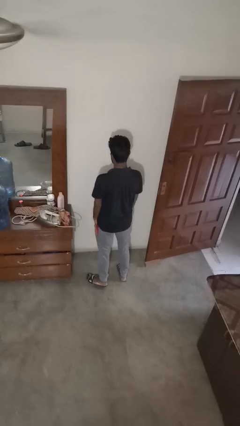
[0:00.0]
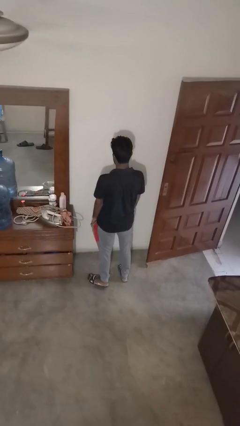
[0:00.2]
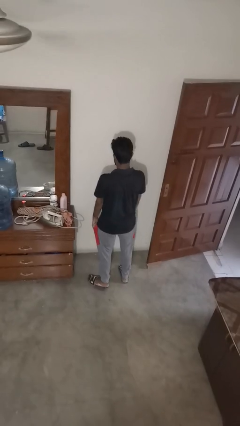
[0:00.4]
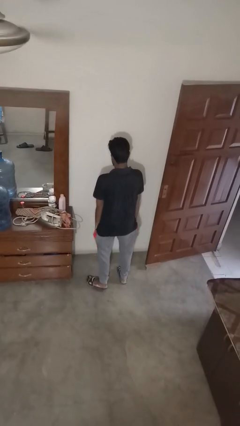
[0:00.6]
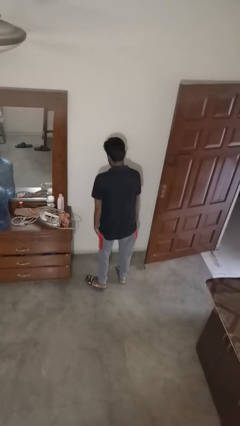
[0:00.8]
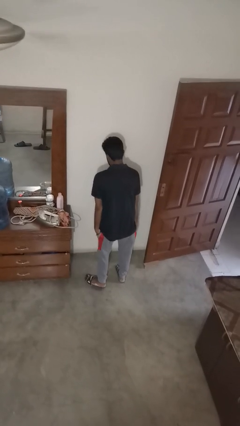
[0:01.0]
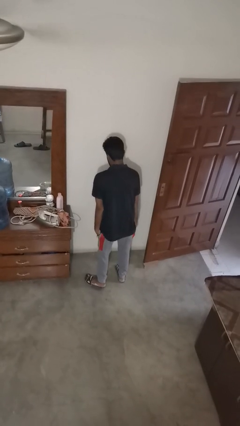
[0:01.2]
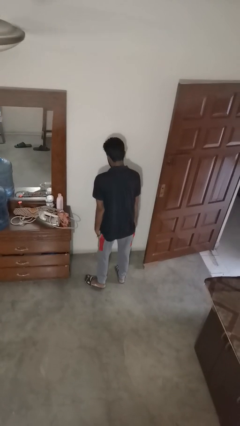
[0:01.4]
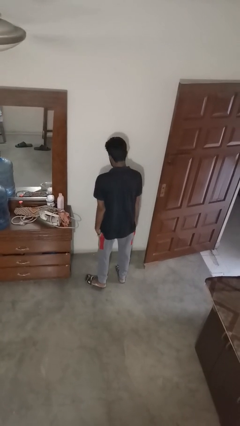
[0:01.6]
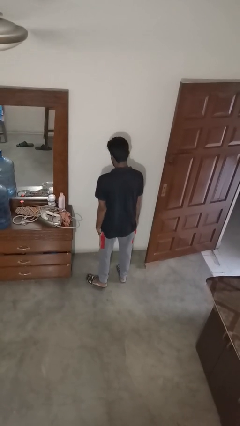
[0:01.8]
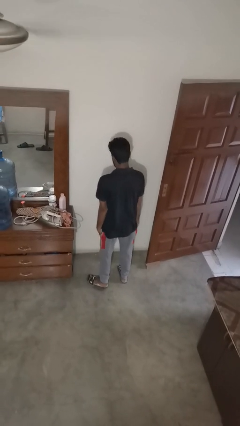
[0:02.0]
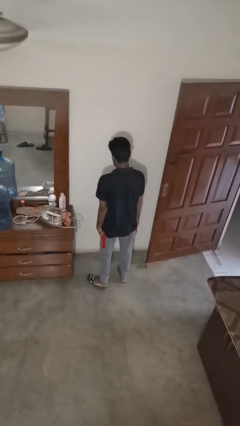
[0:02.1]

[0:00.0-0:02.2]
person puts hands in back pockets

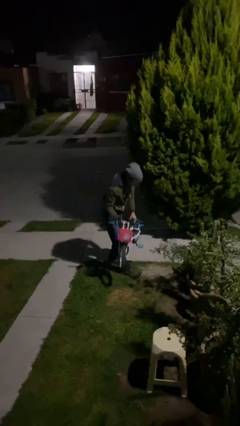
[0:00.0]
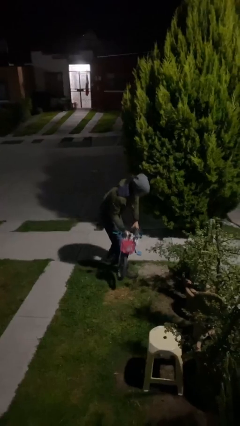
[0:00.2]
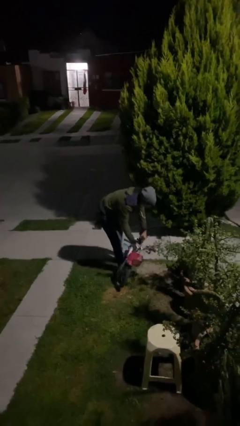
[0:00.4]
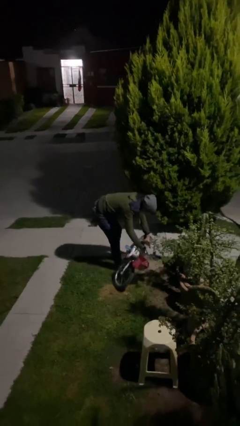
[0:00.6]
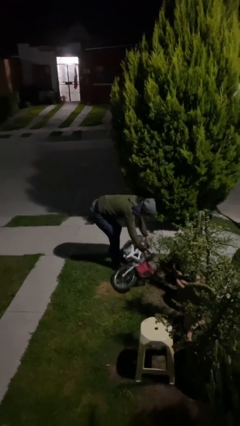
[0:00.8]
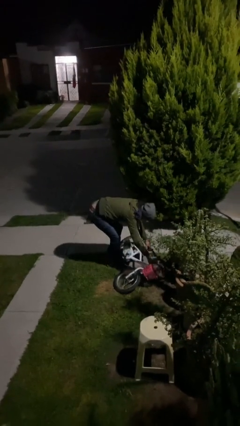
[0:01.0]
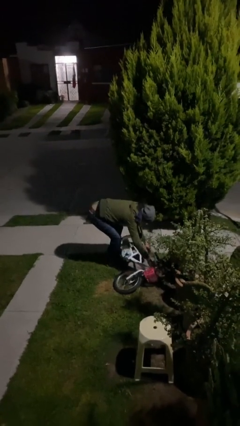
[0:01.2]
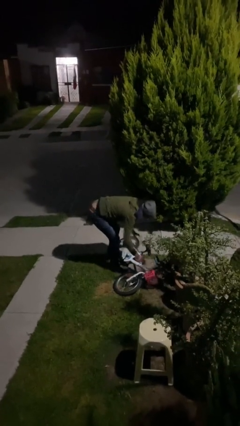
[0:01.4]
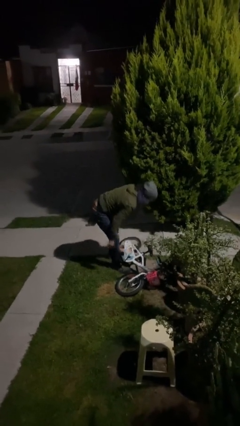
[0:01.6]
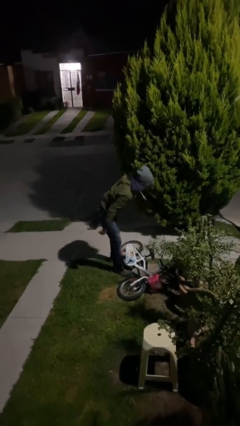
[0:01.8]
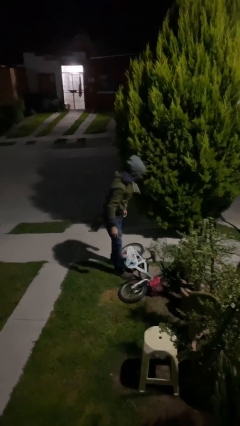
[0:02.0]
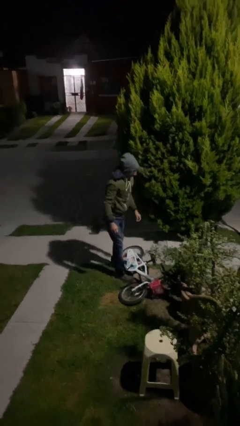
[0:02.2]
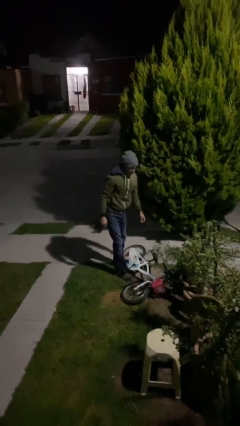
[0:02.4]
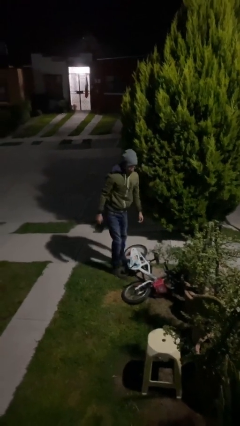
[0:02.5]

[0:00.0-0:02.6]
person puts down object on floor

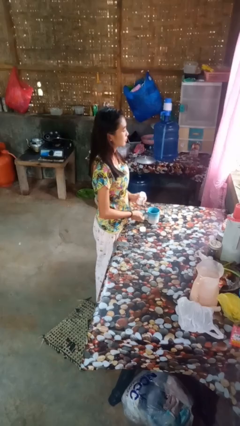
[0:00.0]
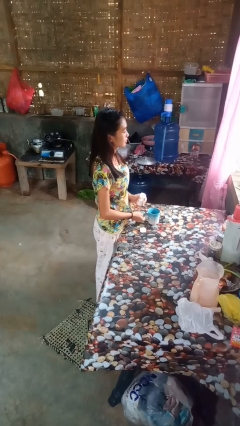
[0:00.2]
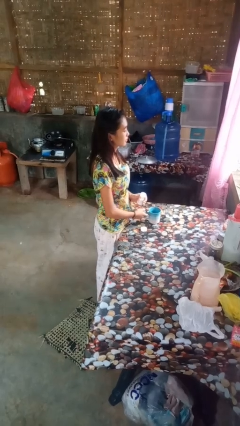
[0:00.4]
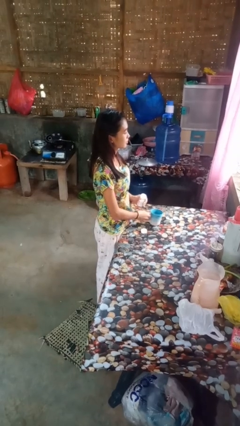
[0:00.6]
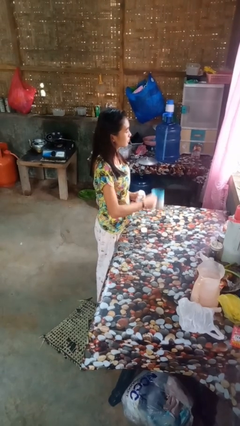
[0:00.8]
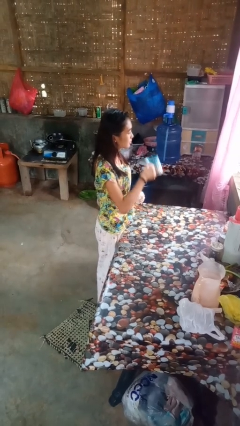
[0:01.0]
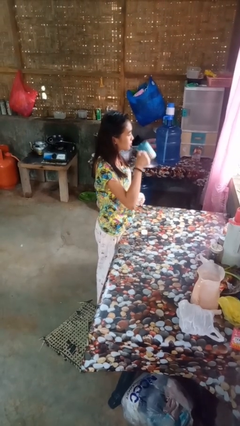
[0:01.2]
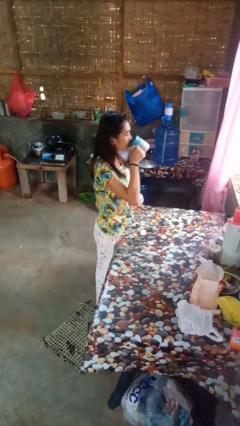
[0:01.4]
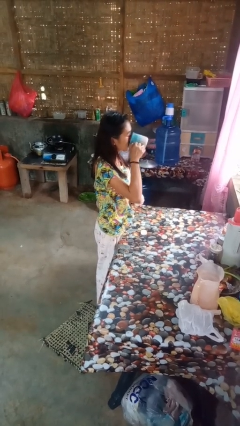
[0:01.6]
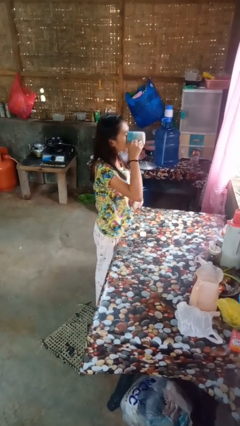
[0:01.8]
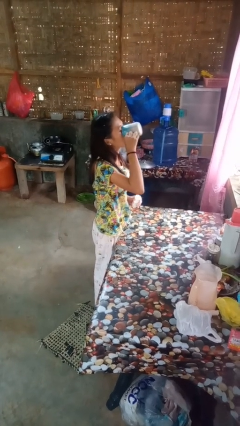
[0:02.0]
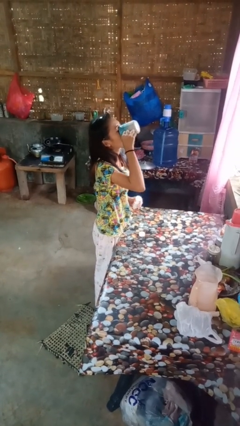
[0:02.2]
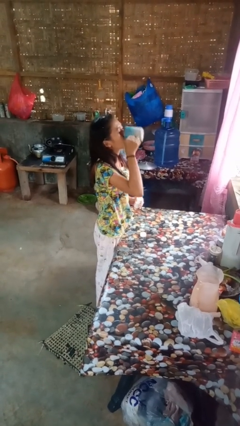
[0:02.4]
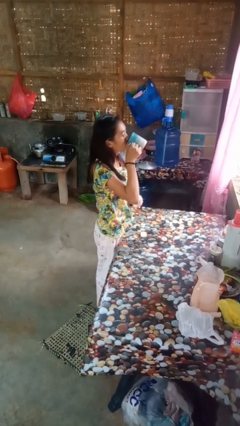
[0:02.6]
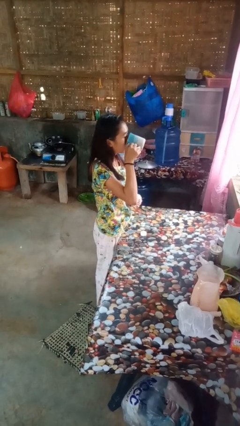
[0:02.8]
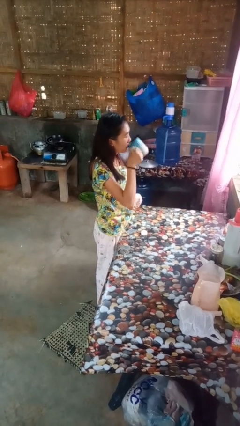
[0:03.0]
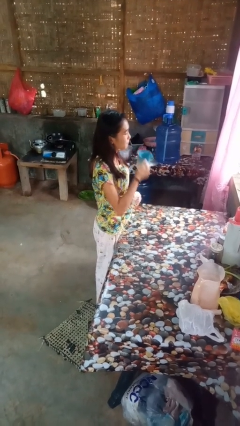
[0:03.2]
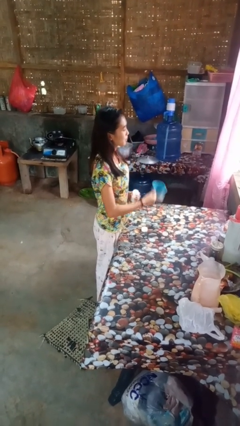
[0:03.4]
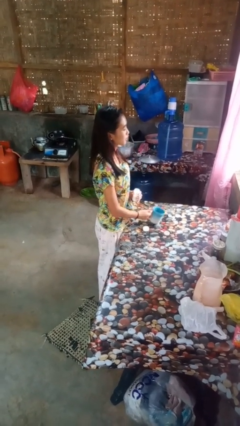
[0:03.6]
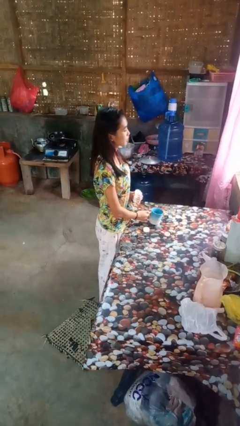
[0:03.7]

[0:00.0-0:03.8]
person drinks from cup

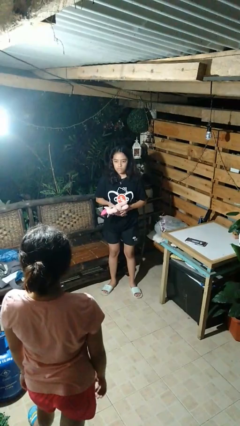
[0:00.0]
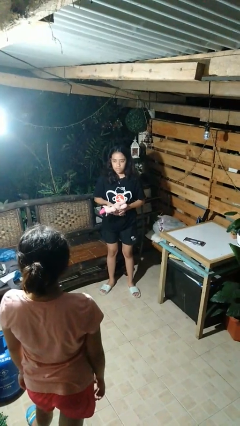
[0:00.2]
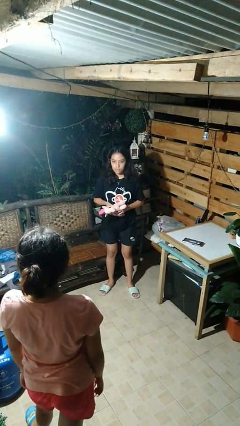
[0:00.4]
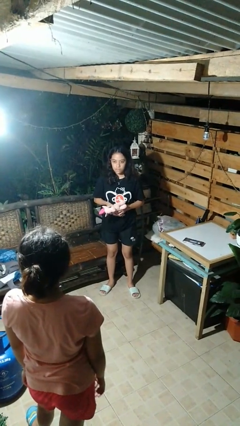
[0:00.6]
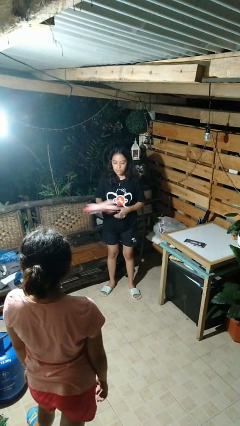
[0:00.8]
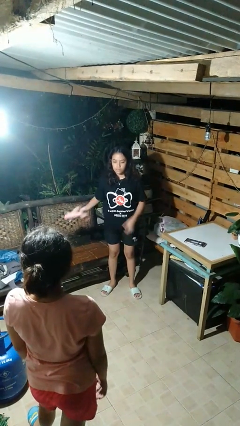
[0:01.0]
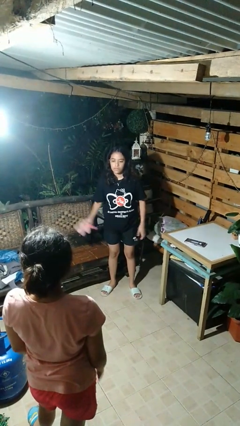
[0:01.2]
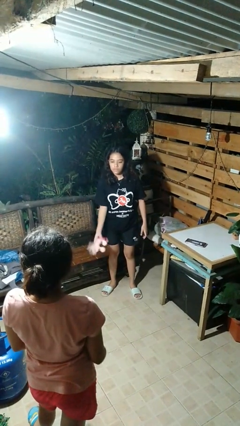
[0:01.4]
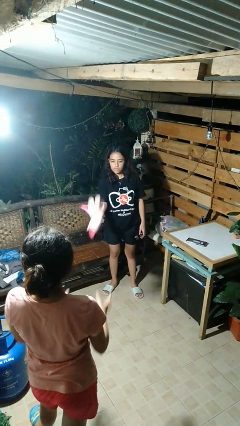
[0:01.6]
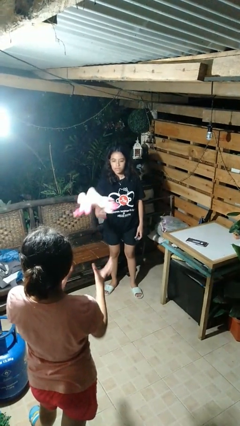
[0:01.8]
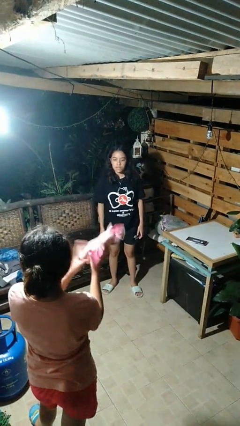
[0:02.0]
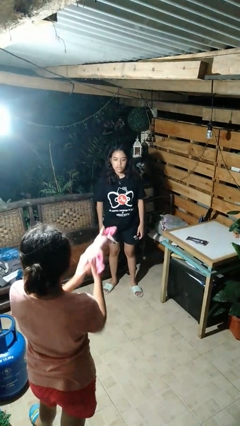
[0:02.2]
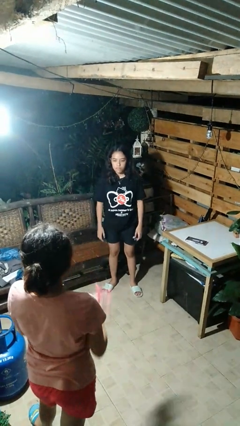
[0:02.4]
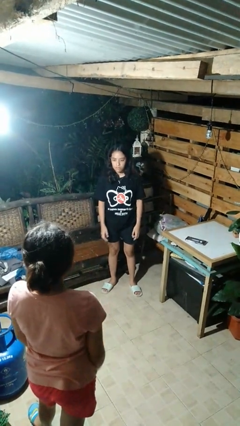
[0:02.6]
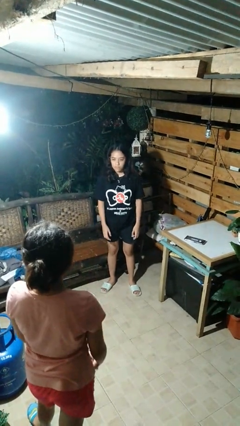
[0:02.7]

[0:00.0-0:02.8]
person throws object to person

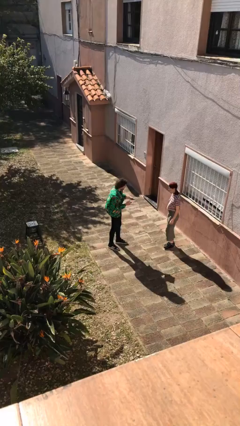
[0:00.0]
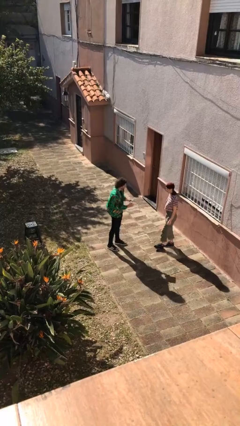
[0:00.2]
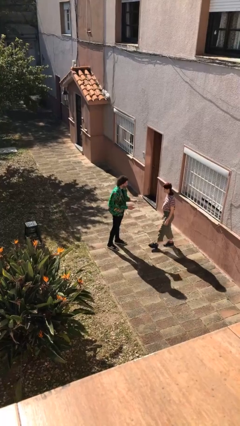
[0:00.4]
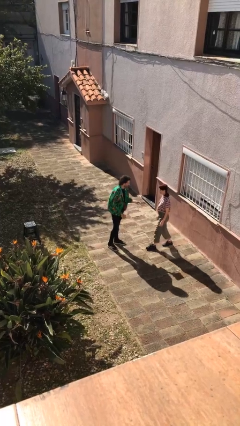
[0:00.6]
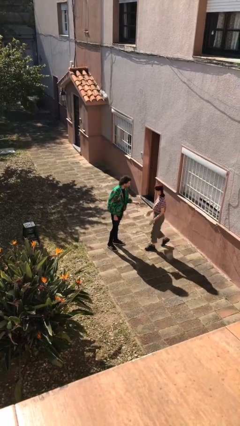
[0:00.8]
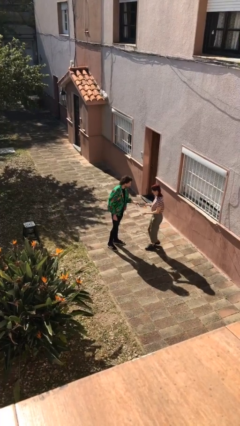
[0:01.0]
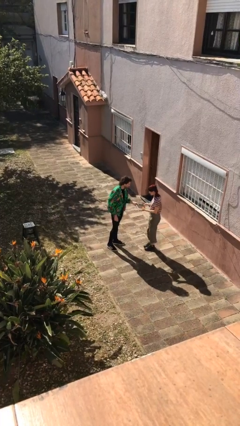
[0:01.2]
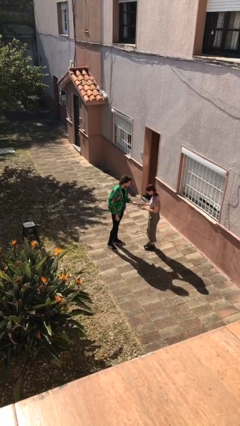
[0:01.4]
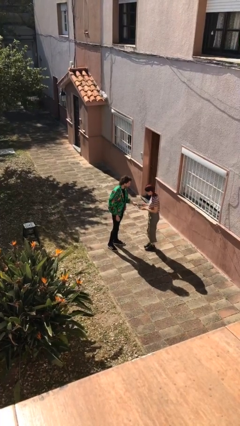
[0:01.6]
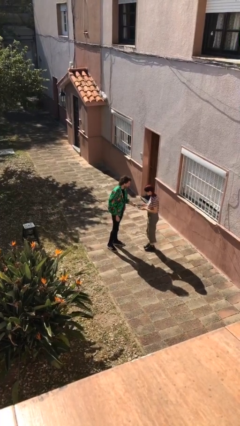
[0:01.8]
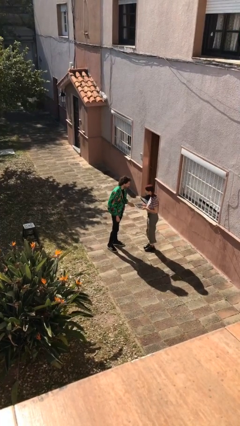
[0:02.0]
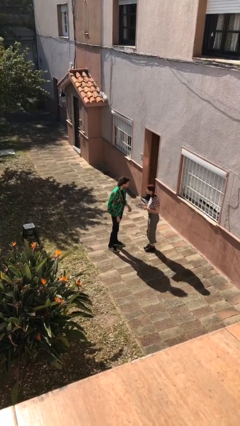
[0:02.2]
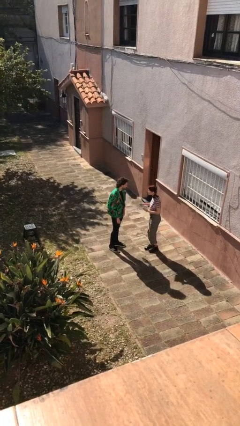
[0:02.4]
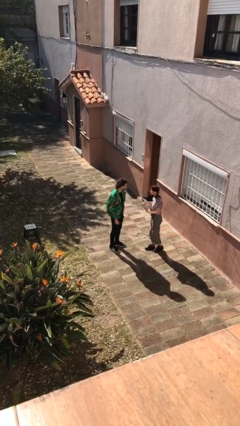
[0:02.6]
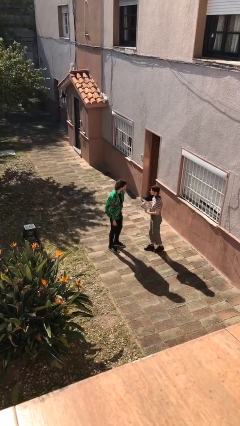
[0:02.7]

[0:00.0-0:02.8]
person transfers object to person

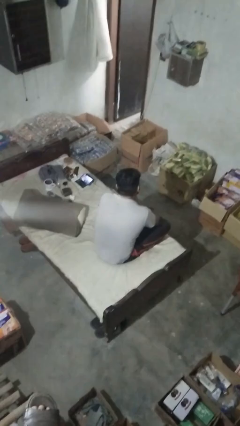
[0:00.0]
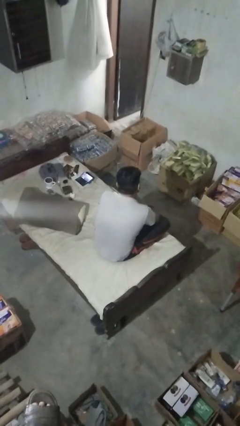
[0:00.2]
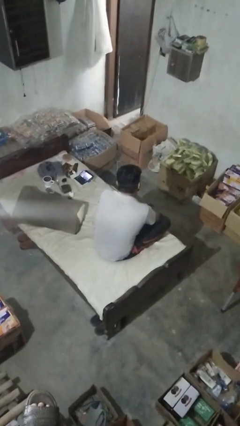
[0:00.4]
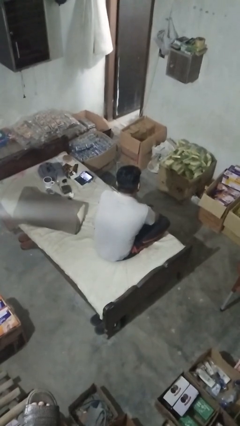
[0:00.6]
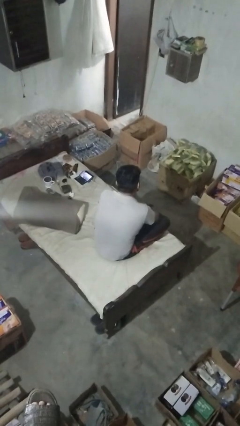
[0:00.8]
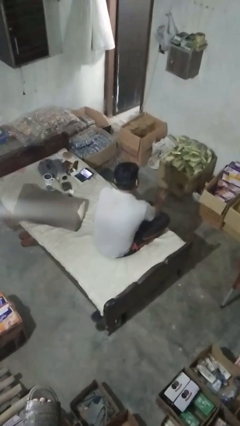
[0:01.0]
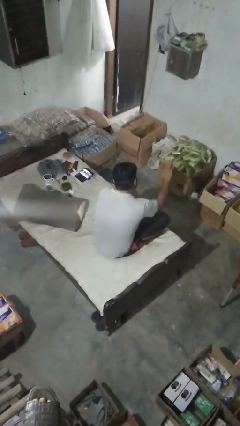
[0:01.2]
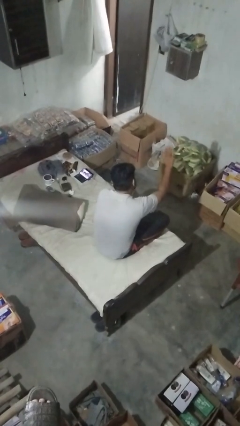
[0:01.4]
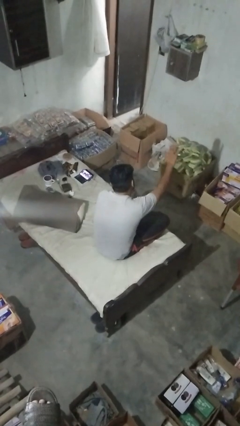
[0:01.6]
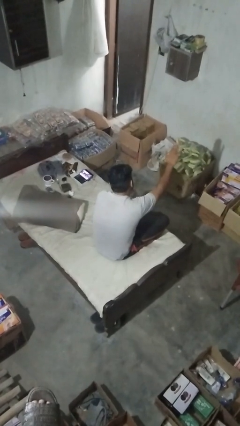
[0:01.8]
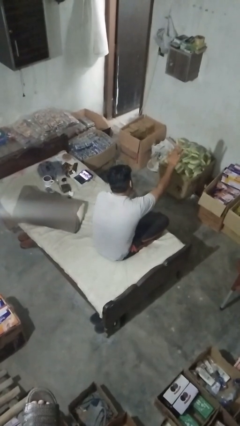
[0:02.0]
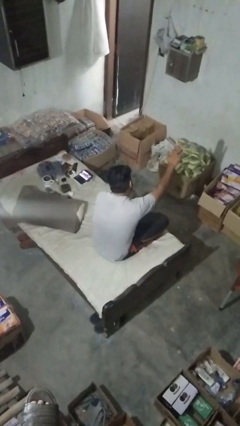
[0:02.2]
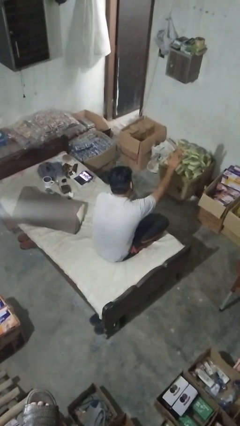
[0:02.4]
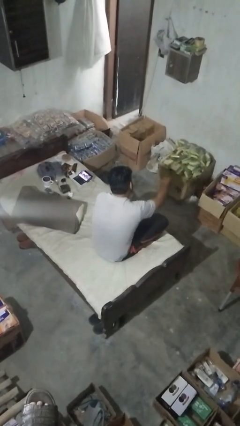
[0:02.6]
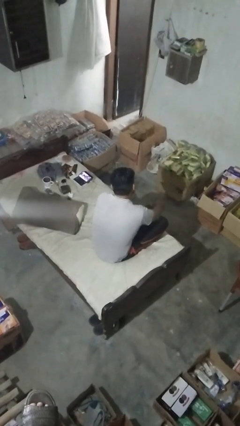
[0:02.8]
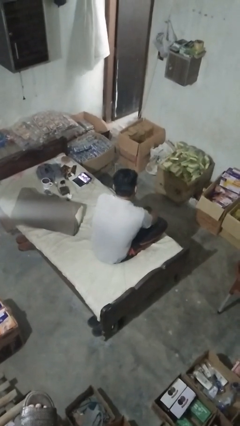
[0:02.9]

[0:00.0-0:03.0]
person gestures stop

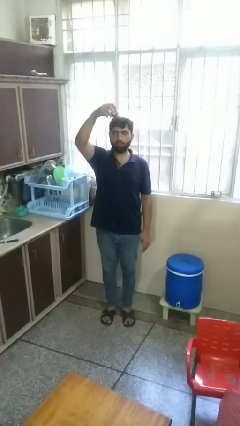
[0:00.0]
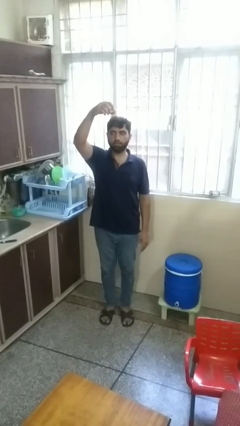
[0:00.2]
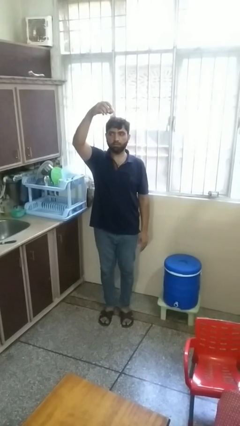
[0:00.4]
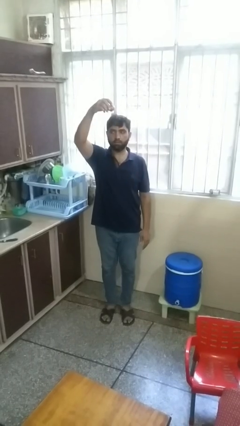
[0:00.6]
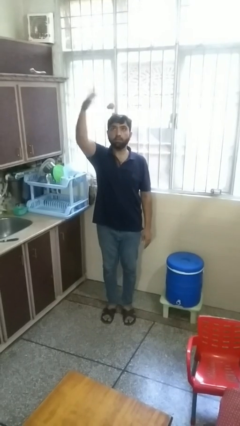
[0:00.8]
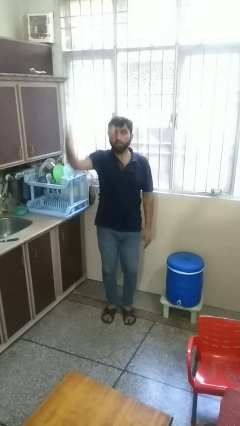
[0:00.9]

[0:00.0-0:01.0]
person drops object
